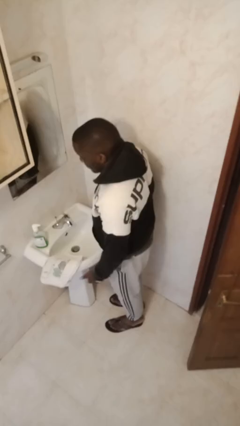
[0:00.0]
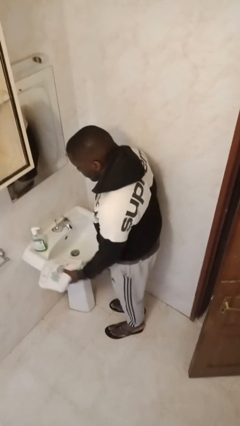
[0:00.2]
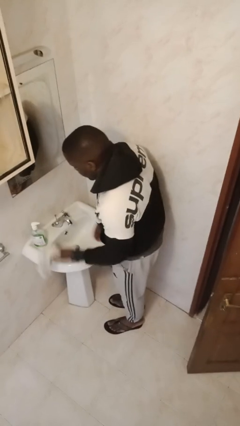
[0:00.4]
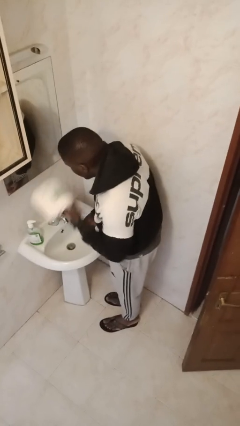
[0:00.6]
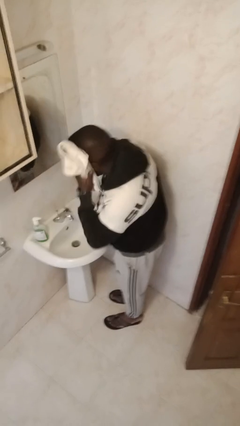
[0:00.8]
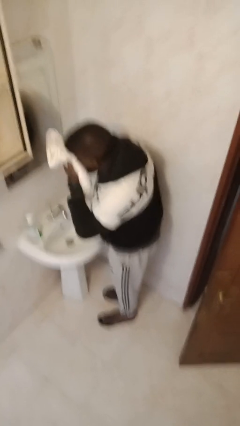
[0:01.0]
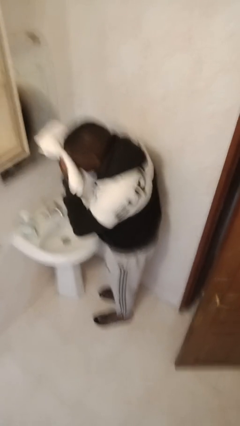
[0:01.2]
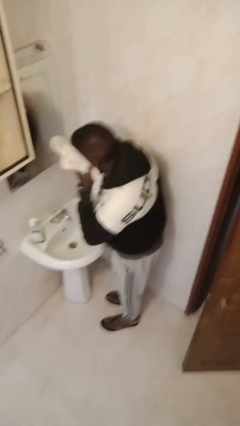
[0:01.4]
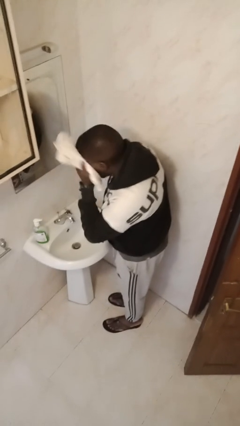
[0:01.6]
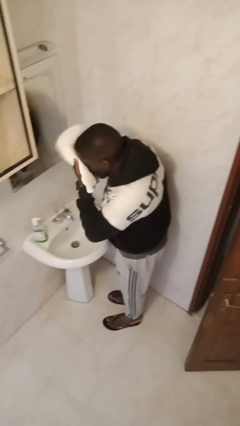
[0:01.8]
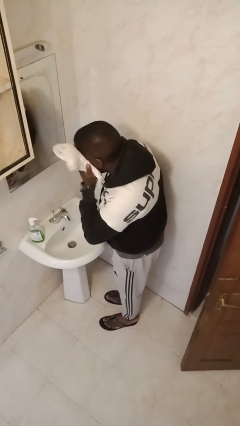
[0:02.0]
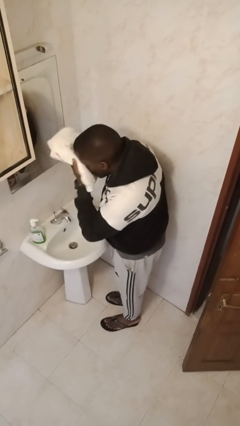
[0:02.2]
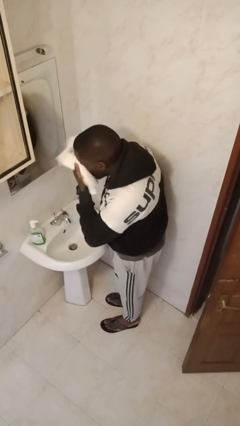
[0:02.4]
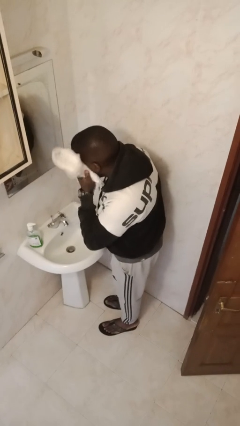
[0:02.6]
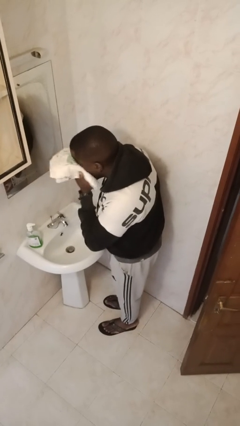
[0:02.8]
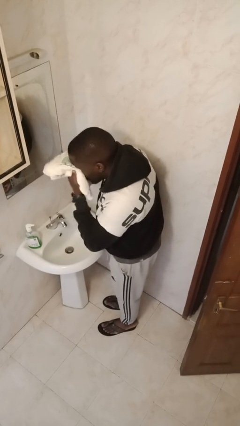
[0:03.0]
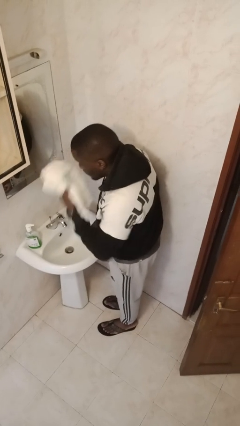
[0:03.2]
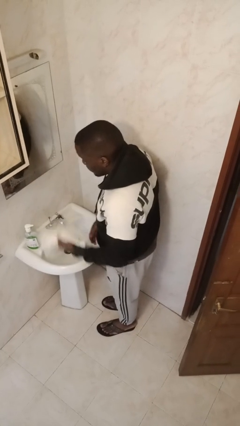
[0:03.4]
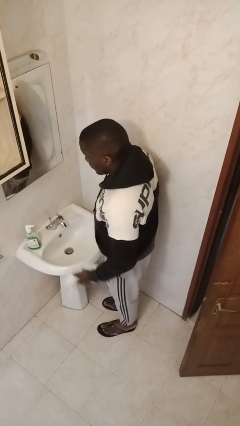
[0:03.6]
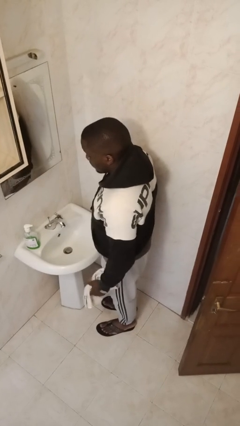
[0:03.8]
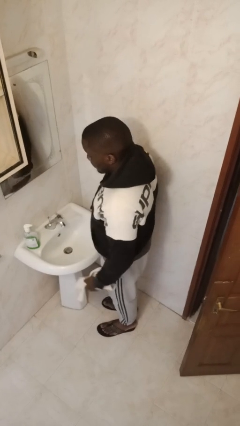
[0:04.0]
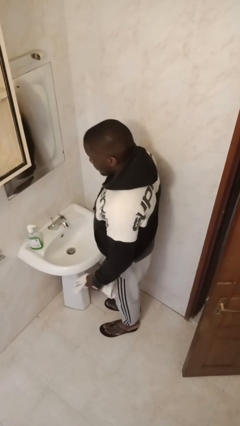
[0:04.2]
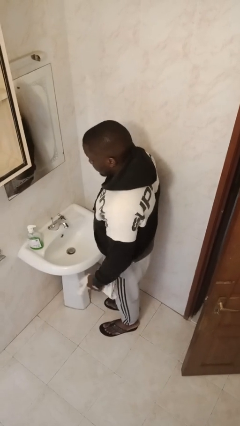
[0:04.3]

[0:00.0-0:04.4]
person dries face with towel

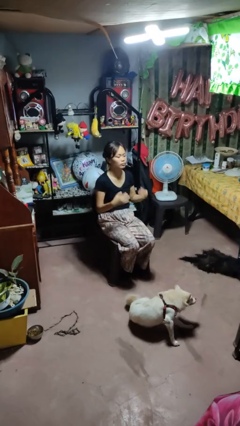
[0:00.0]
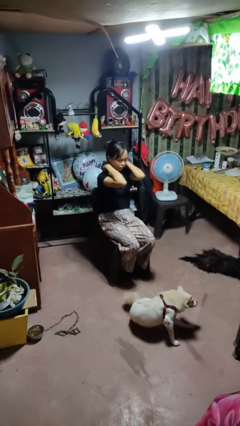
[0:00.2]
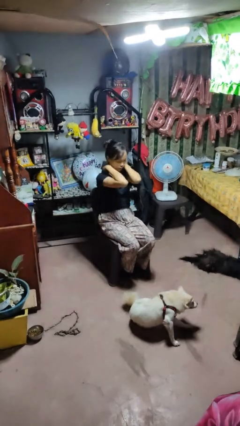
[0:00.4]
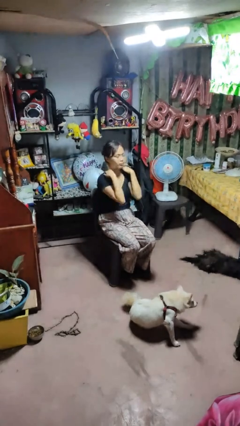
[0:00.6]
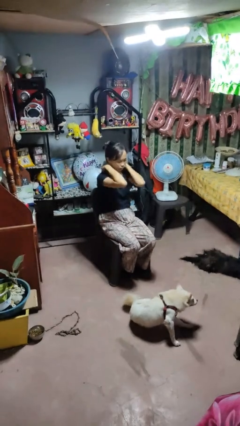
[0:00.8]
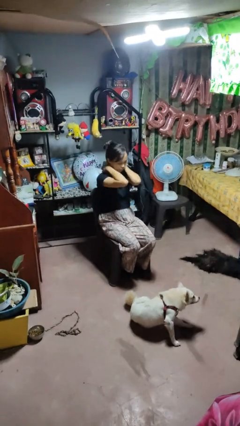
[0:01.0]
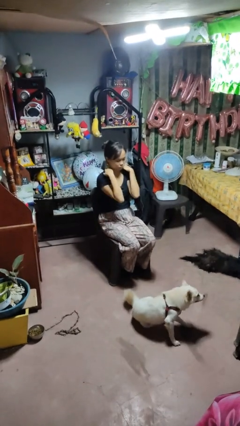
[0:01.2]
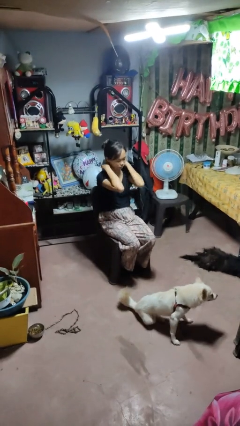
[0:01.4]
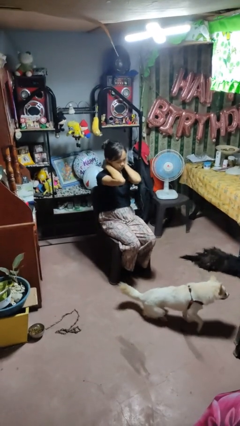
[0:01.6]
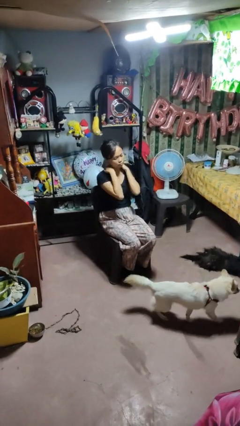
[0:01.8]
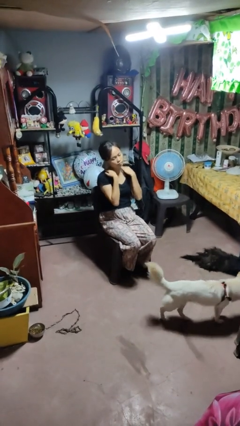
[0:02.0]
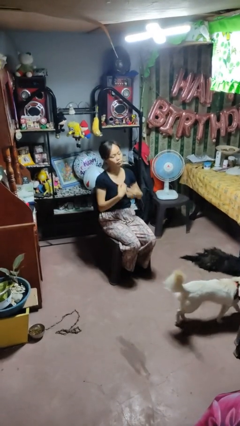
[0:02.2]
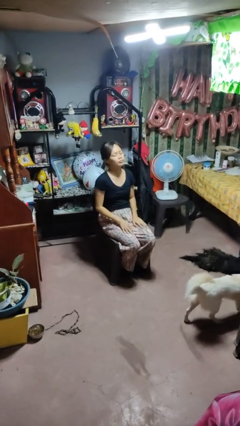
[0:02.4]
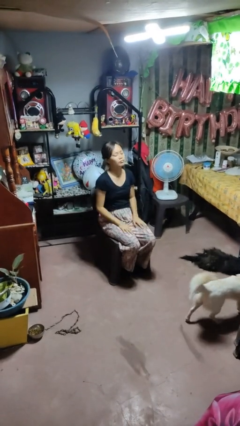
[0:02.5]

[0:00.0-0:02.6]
person rubs neck

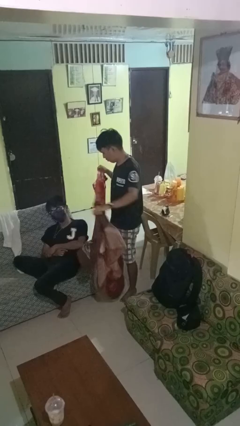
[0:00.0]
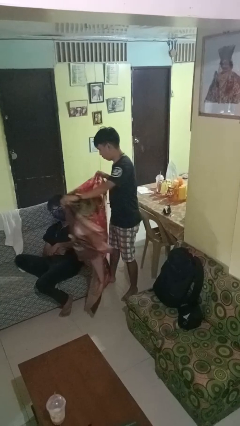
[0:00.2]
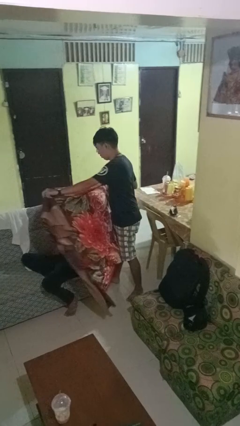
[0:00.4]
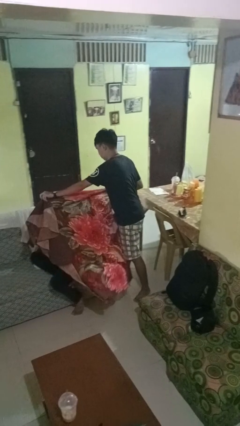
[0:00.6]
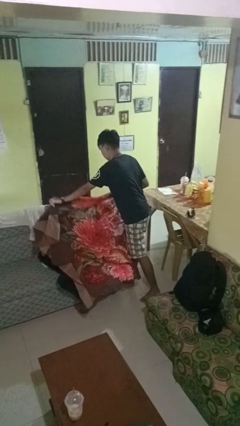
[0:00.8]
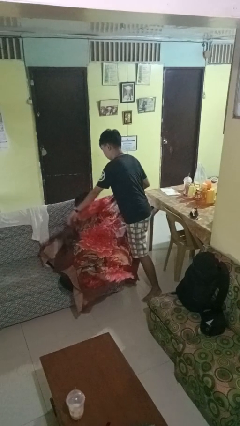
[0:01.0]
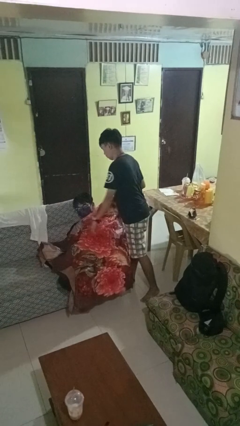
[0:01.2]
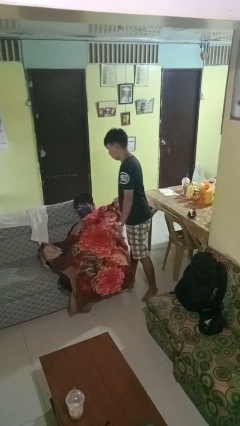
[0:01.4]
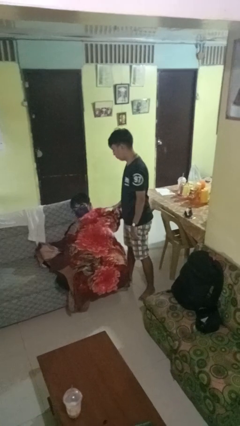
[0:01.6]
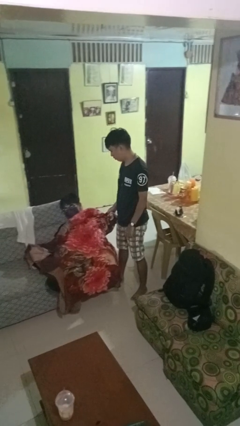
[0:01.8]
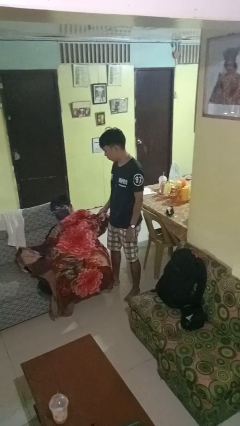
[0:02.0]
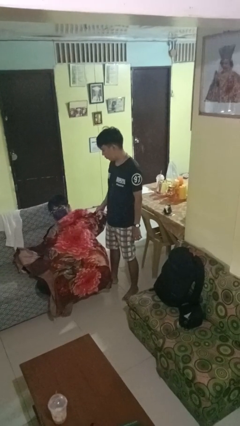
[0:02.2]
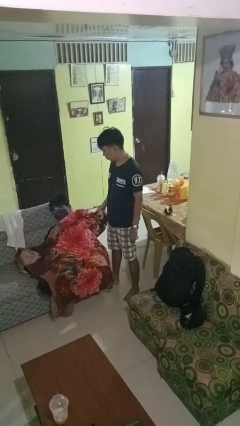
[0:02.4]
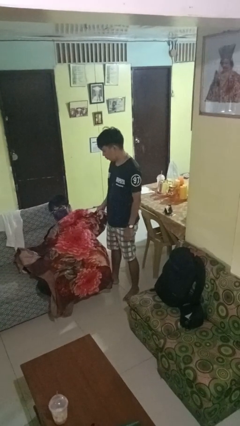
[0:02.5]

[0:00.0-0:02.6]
person covers friend with blanket

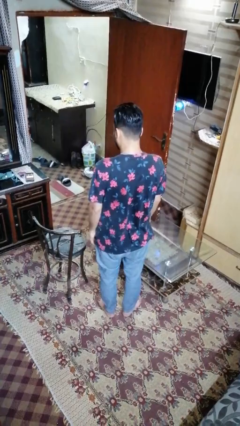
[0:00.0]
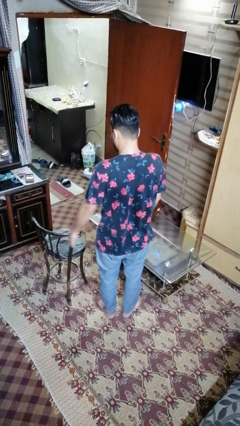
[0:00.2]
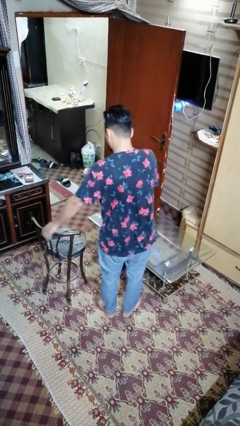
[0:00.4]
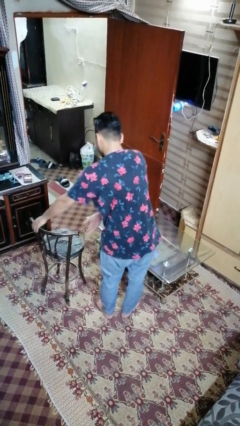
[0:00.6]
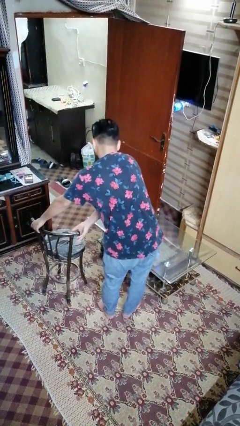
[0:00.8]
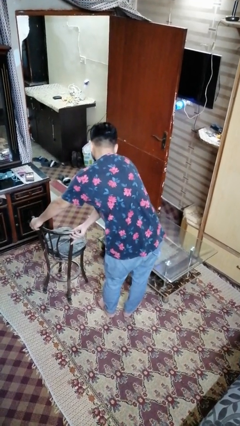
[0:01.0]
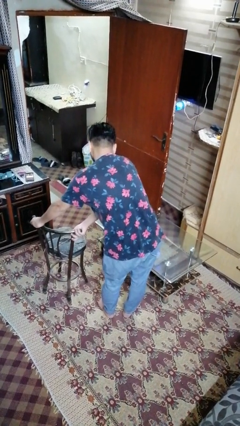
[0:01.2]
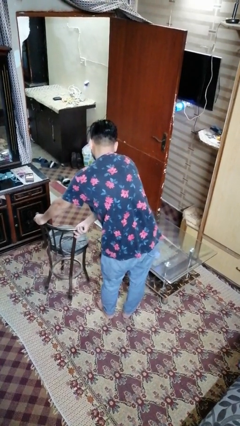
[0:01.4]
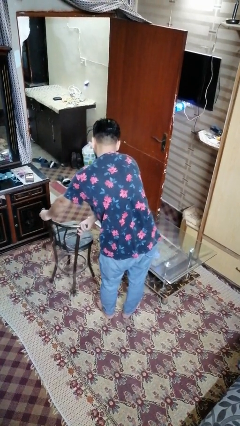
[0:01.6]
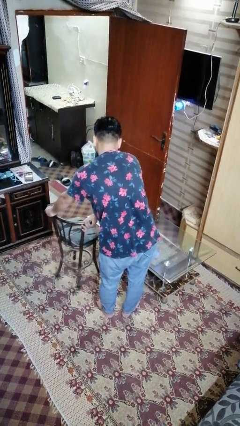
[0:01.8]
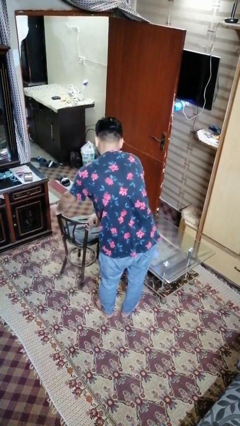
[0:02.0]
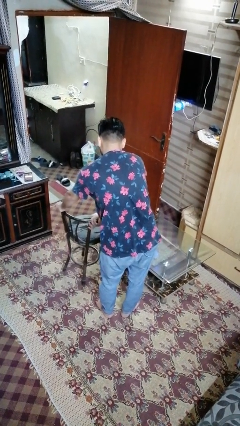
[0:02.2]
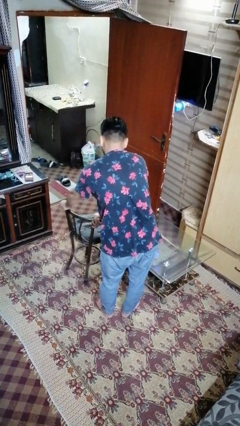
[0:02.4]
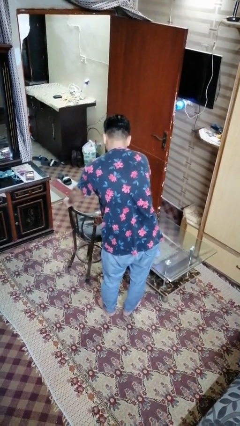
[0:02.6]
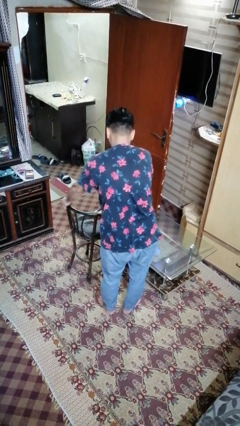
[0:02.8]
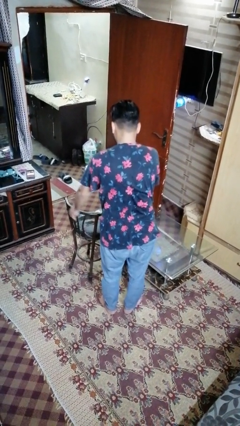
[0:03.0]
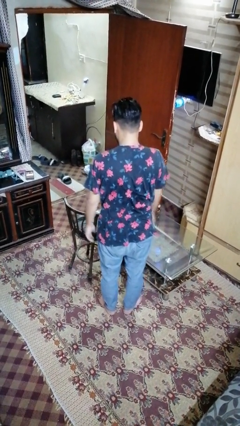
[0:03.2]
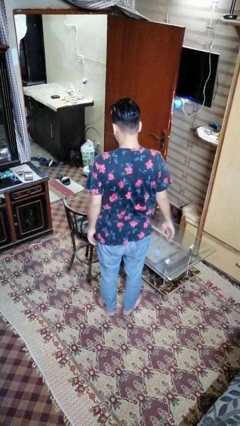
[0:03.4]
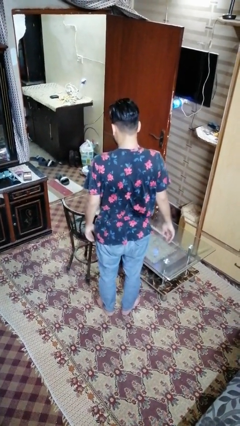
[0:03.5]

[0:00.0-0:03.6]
person pushes in chair

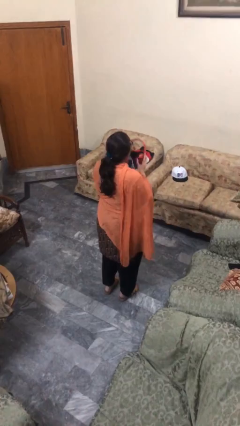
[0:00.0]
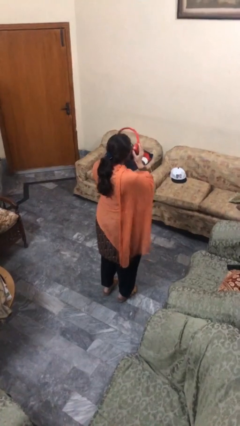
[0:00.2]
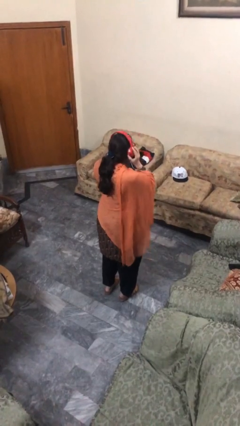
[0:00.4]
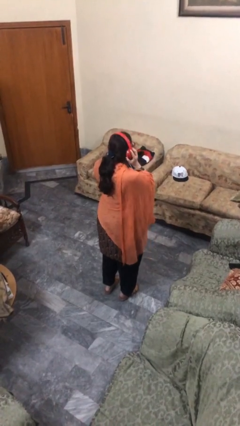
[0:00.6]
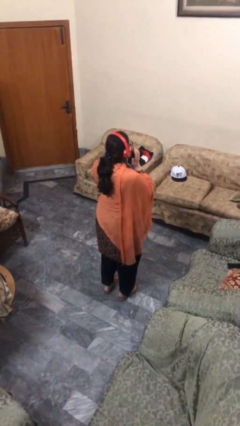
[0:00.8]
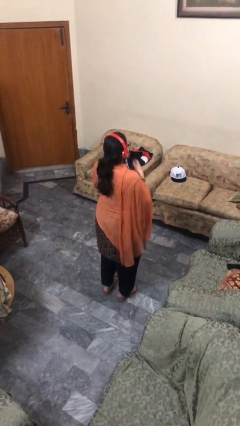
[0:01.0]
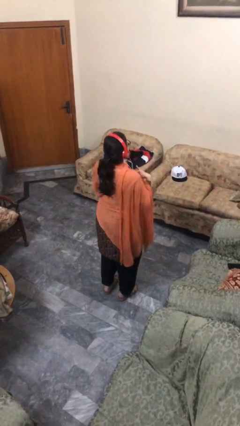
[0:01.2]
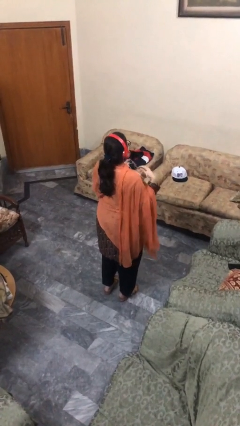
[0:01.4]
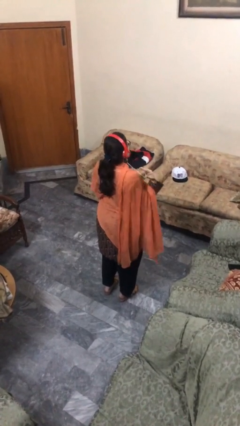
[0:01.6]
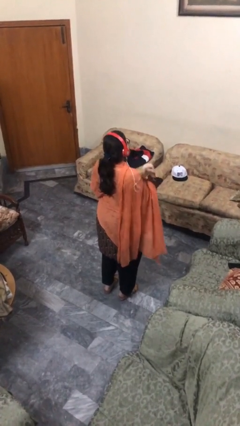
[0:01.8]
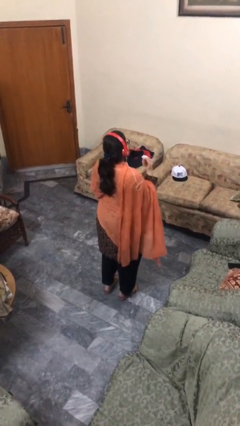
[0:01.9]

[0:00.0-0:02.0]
person puts on headphones

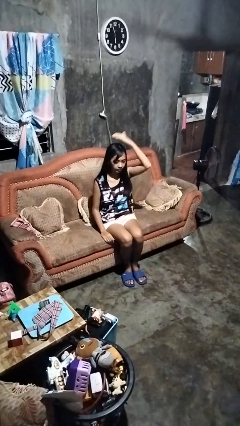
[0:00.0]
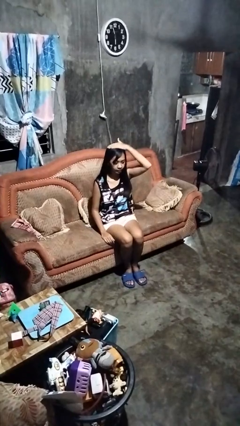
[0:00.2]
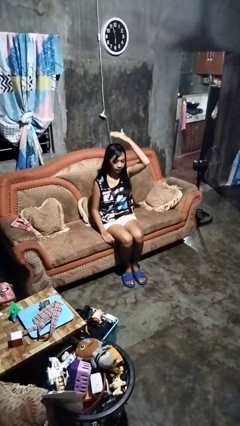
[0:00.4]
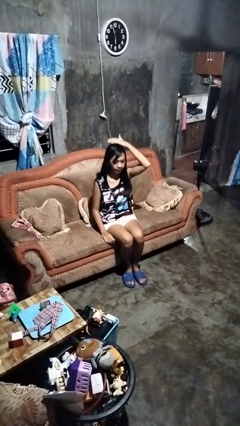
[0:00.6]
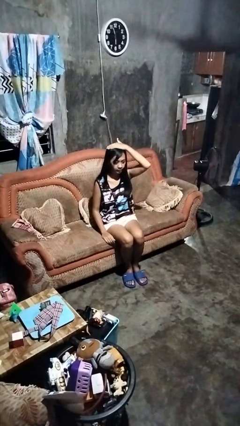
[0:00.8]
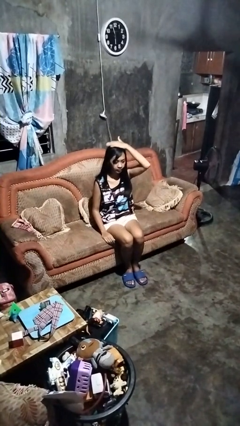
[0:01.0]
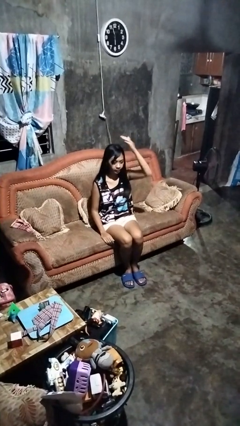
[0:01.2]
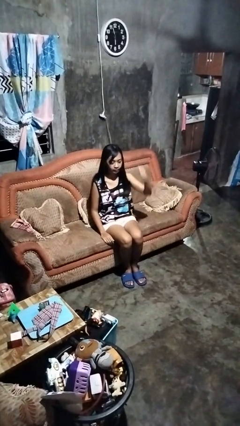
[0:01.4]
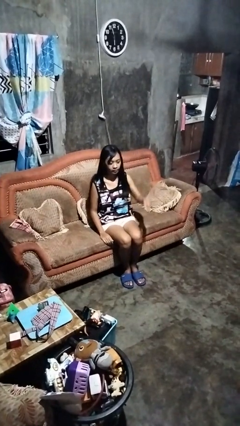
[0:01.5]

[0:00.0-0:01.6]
person pats head

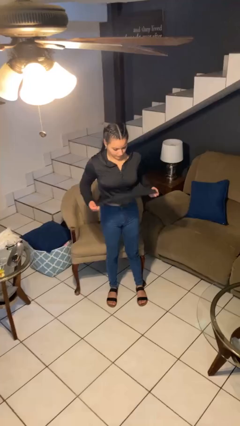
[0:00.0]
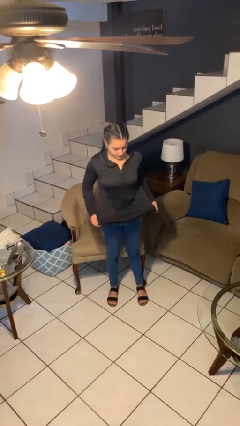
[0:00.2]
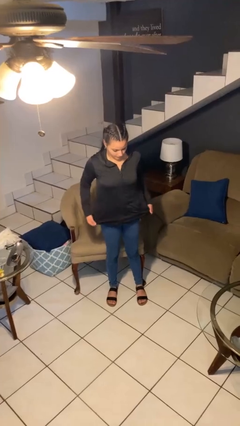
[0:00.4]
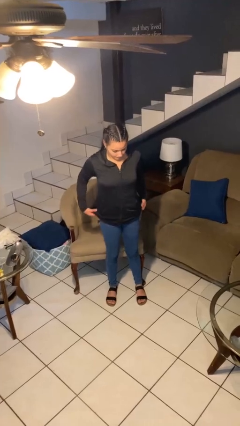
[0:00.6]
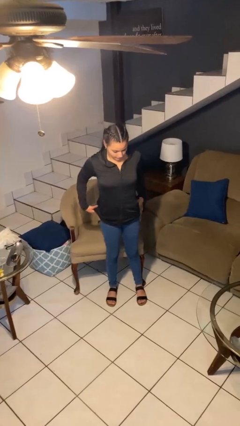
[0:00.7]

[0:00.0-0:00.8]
person untucks shirt
